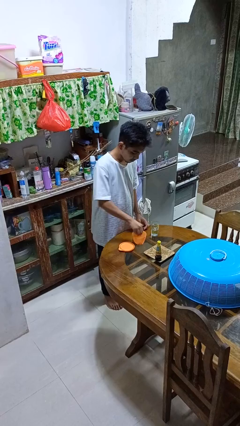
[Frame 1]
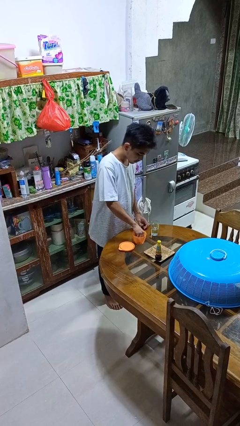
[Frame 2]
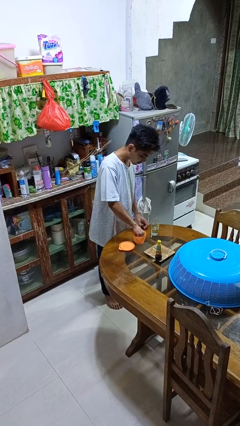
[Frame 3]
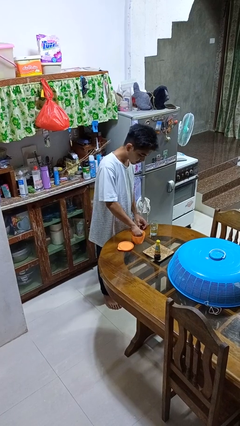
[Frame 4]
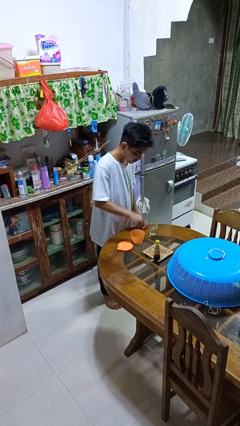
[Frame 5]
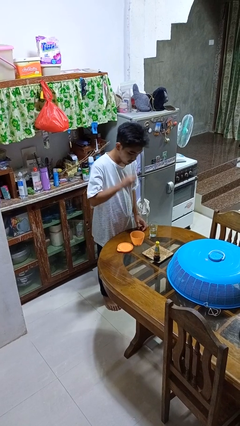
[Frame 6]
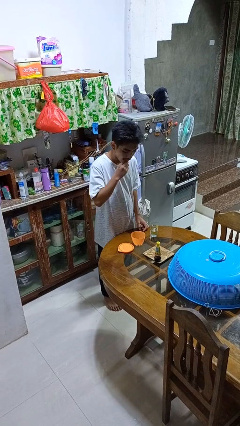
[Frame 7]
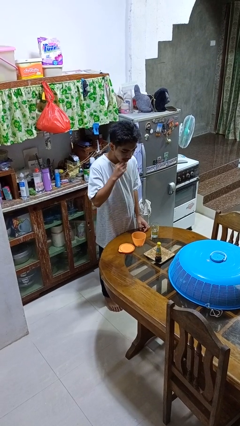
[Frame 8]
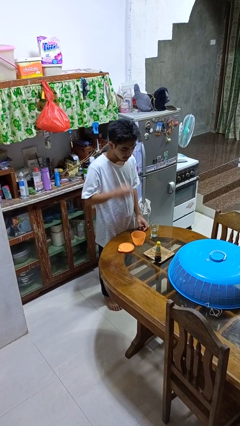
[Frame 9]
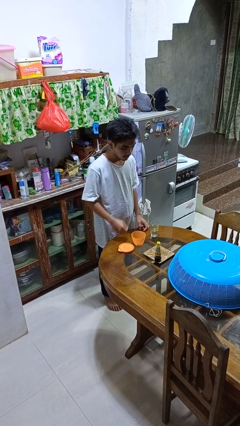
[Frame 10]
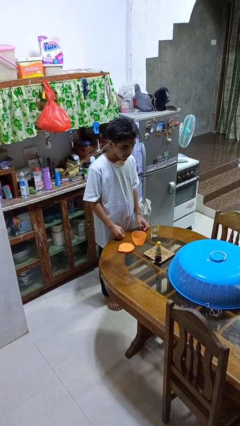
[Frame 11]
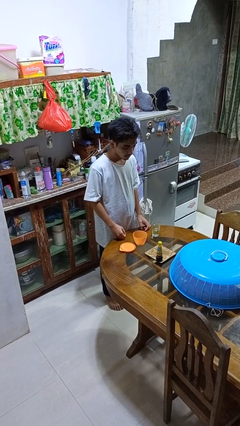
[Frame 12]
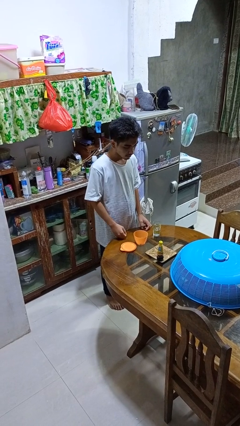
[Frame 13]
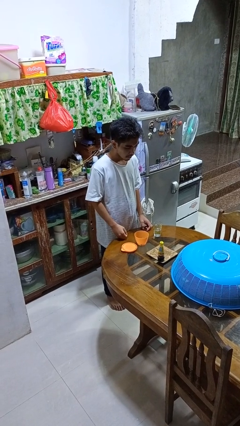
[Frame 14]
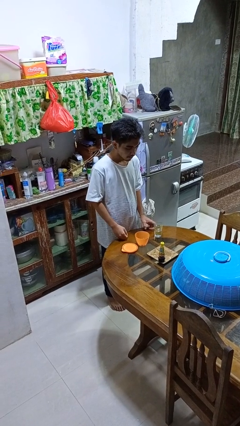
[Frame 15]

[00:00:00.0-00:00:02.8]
person takes medicine pills

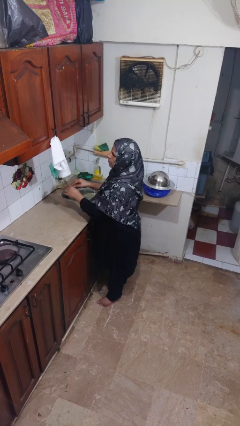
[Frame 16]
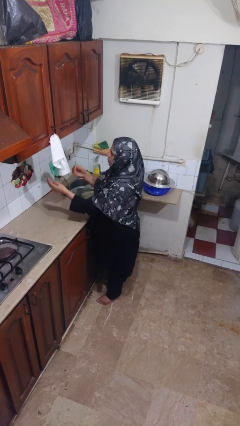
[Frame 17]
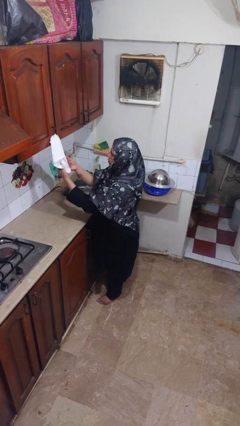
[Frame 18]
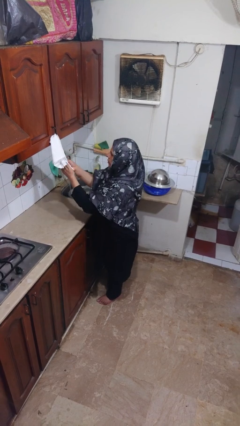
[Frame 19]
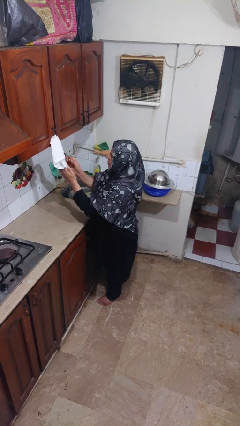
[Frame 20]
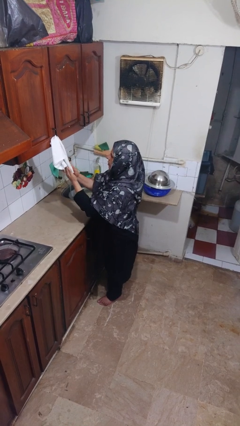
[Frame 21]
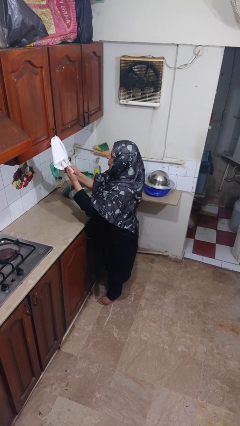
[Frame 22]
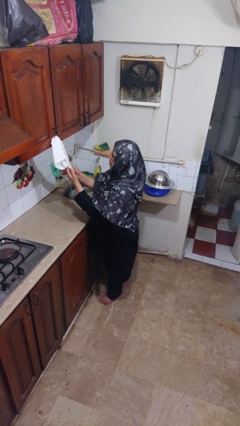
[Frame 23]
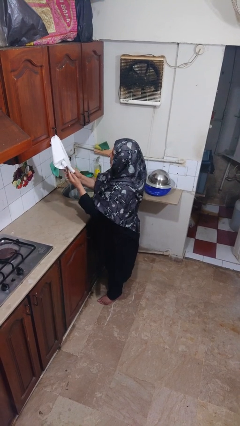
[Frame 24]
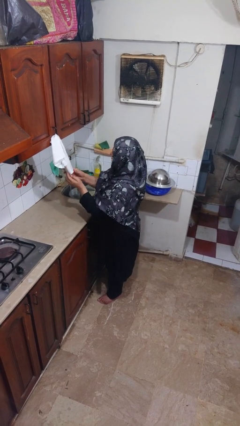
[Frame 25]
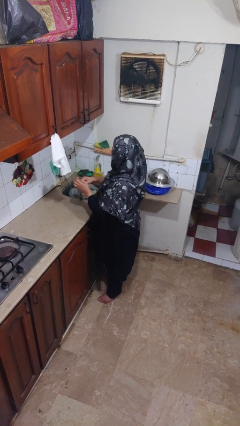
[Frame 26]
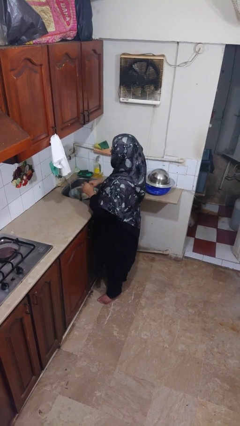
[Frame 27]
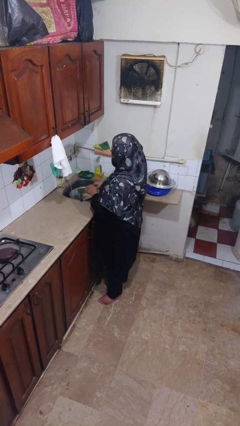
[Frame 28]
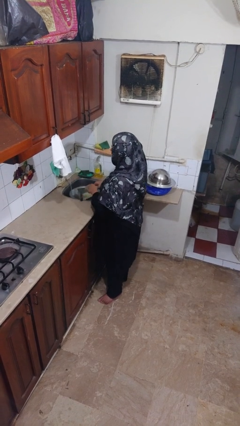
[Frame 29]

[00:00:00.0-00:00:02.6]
person dries hands with towel

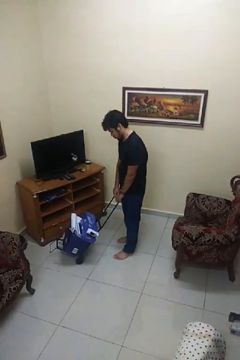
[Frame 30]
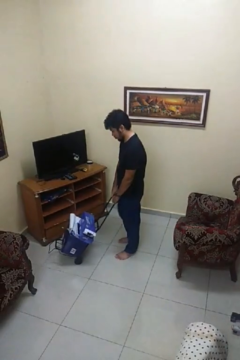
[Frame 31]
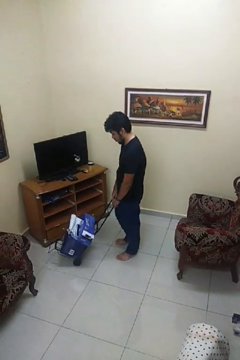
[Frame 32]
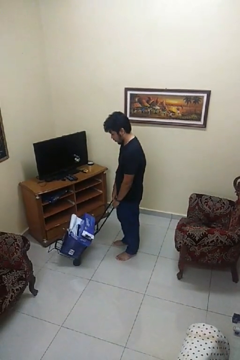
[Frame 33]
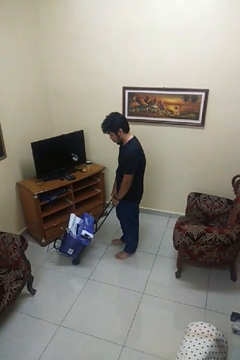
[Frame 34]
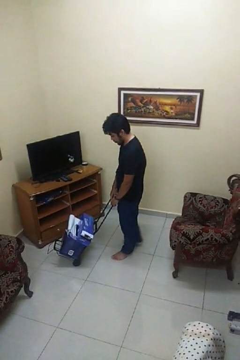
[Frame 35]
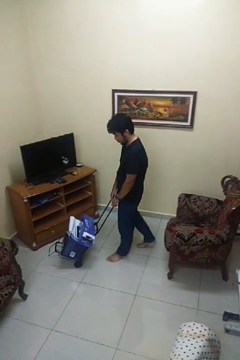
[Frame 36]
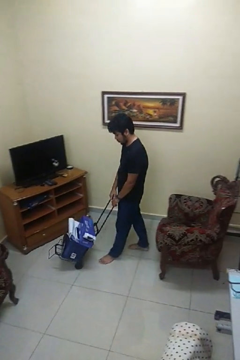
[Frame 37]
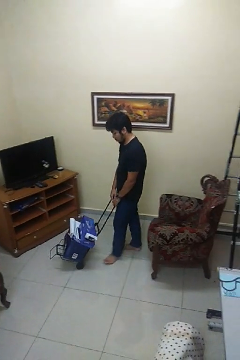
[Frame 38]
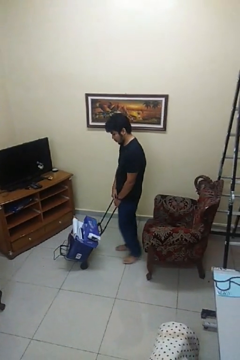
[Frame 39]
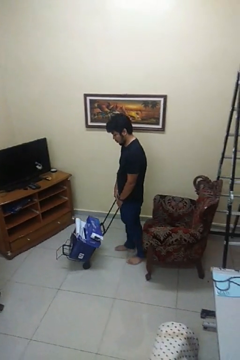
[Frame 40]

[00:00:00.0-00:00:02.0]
person pulls wheeled cart

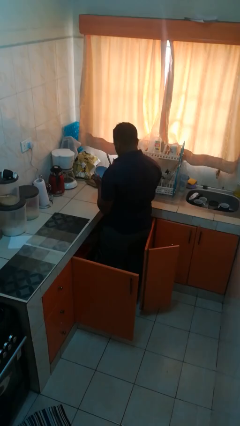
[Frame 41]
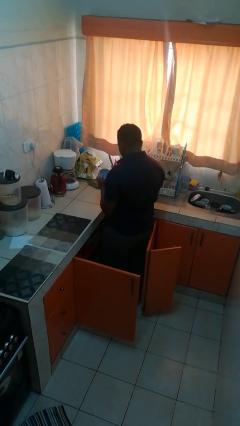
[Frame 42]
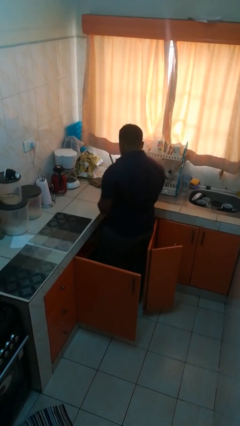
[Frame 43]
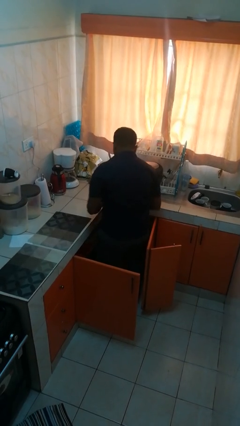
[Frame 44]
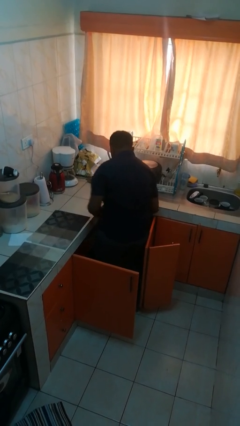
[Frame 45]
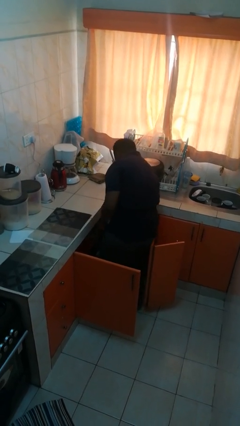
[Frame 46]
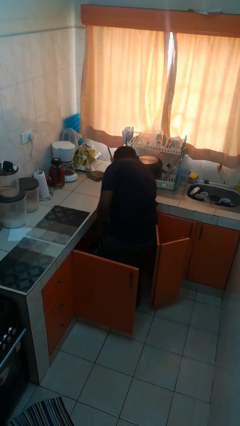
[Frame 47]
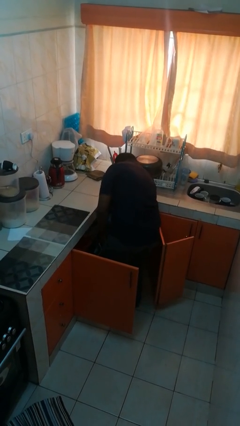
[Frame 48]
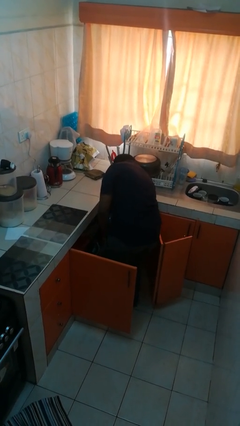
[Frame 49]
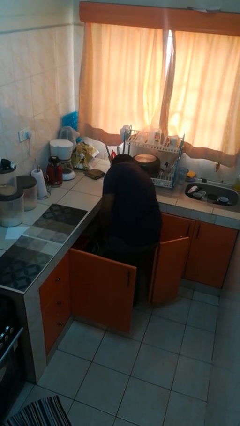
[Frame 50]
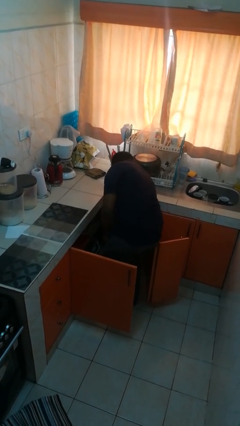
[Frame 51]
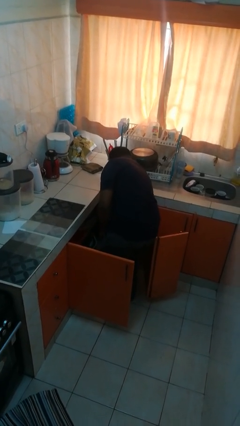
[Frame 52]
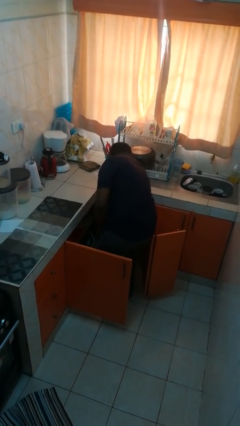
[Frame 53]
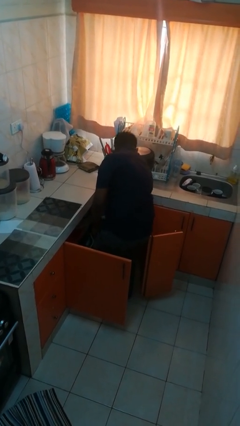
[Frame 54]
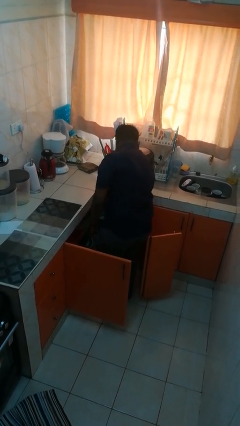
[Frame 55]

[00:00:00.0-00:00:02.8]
person puts object in cabinet

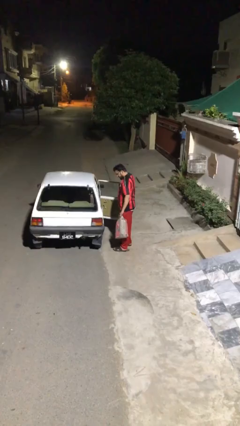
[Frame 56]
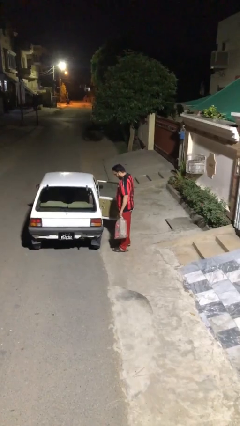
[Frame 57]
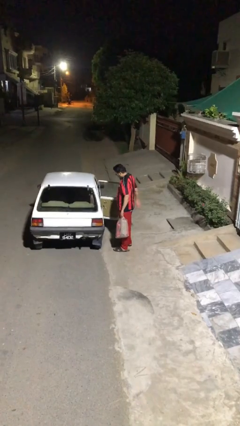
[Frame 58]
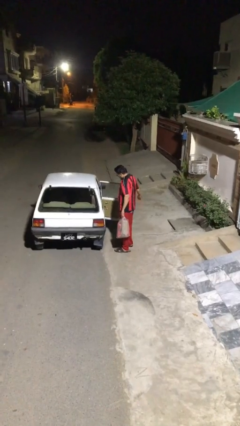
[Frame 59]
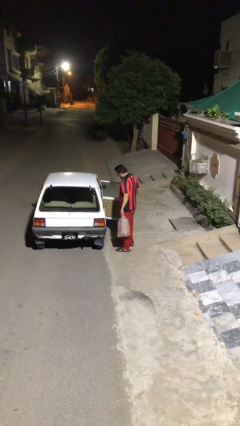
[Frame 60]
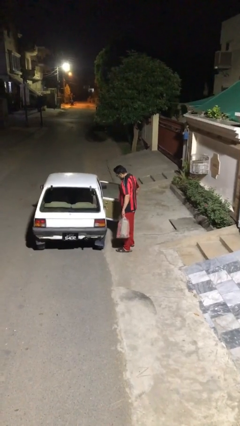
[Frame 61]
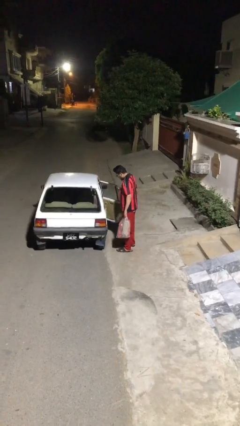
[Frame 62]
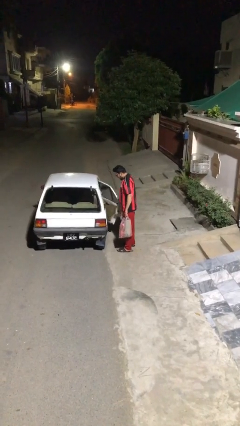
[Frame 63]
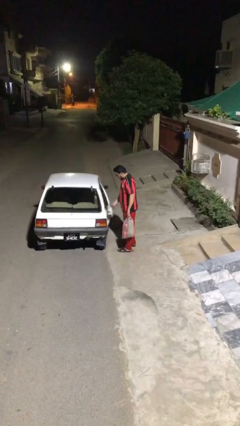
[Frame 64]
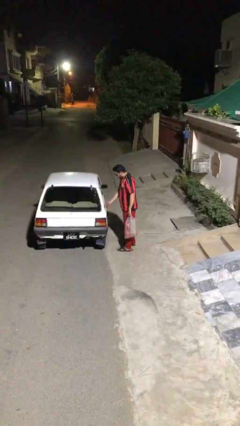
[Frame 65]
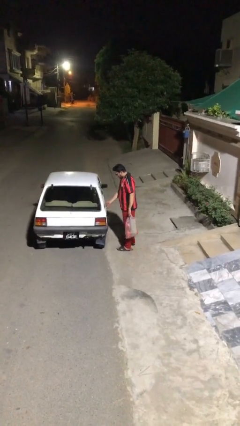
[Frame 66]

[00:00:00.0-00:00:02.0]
person closes car door

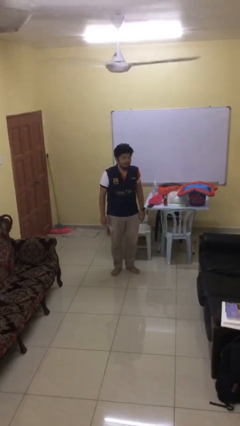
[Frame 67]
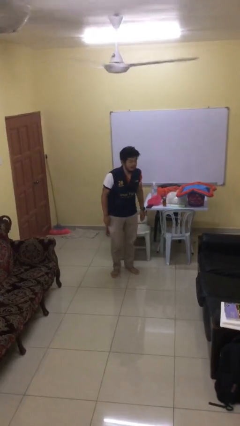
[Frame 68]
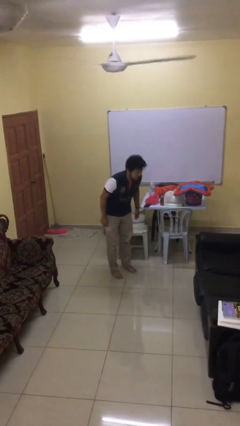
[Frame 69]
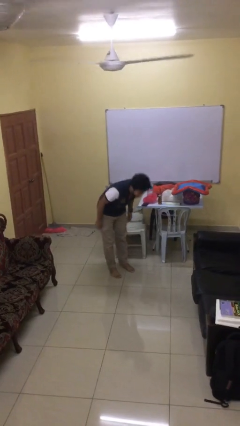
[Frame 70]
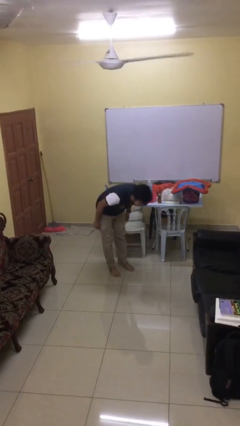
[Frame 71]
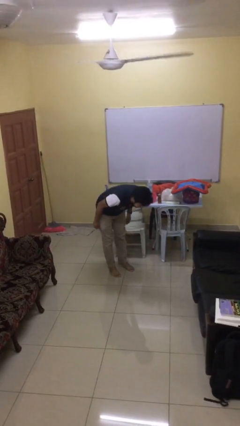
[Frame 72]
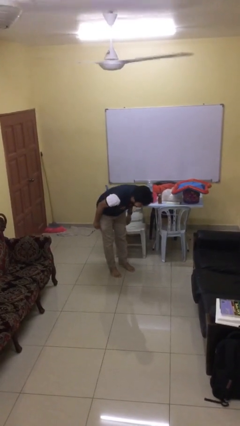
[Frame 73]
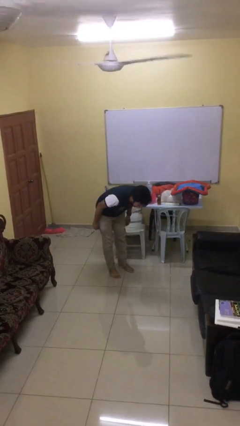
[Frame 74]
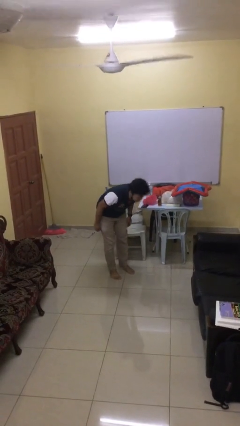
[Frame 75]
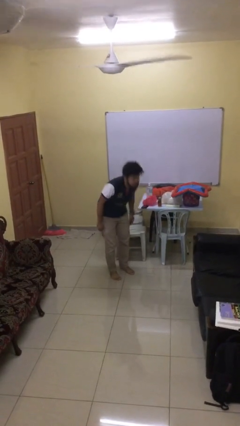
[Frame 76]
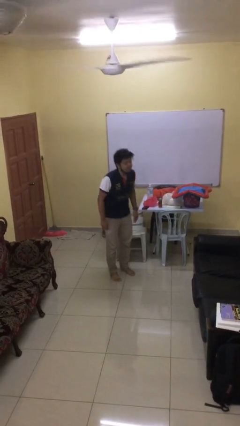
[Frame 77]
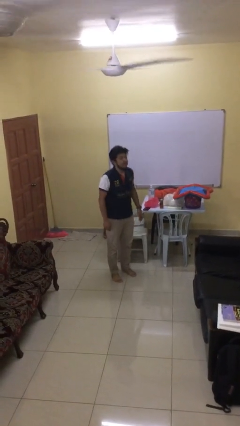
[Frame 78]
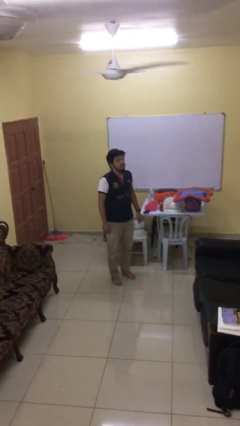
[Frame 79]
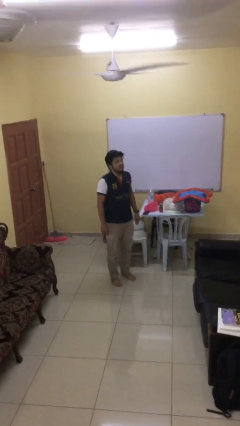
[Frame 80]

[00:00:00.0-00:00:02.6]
person bows

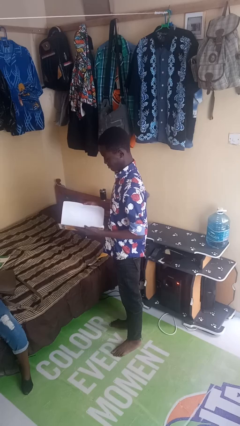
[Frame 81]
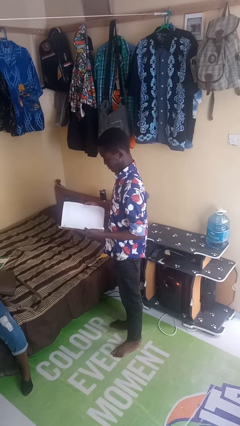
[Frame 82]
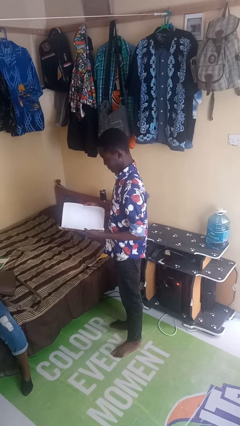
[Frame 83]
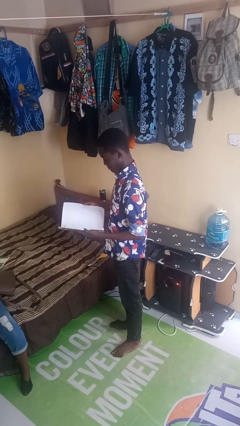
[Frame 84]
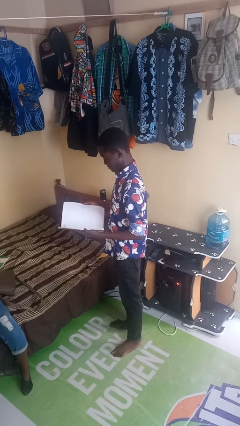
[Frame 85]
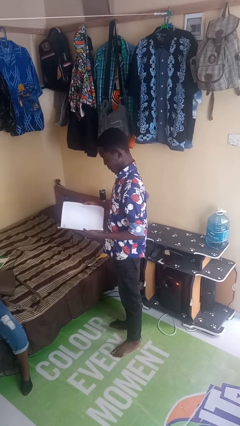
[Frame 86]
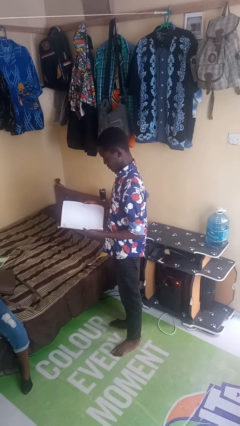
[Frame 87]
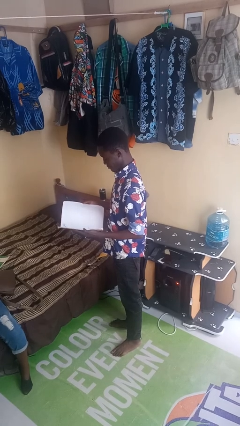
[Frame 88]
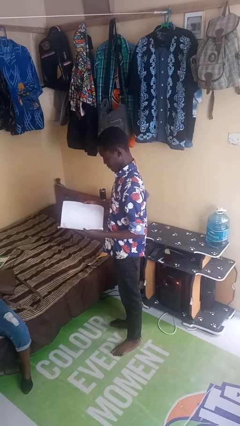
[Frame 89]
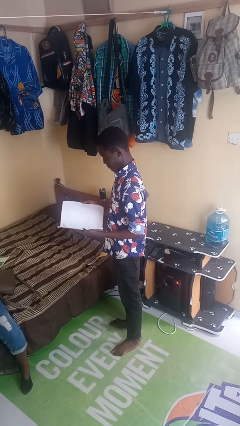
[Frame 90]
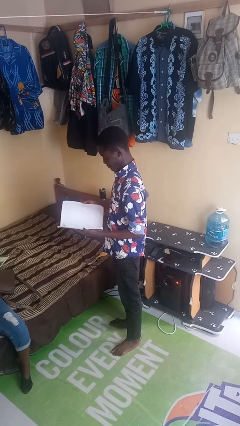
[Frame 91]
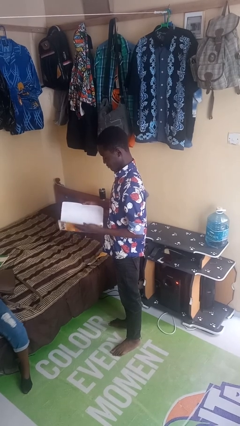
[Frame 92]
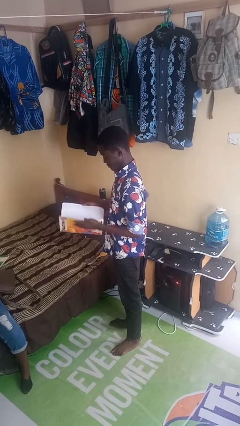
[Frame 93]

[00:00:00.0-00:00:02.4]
person reads book

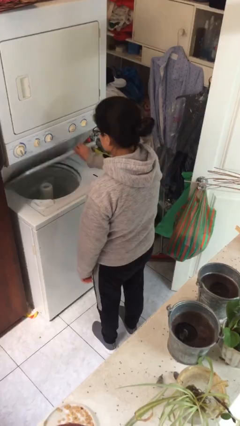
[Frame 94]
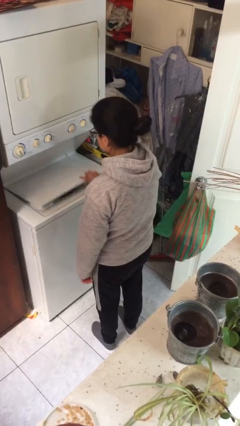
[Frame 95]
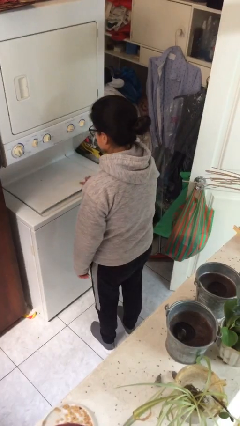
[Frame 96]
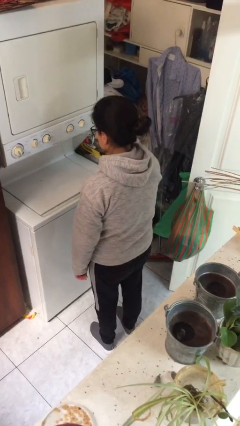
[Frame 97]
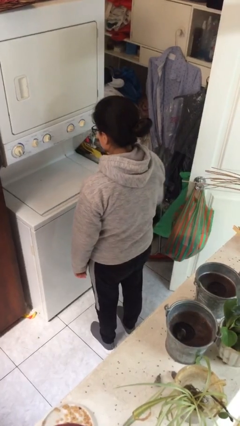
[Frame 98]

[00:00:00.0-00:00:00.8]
person closes clothes washer
